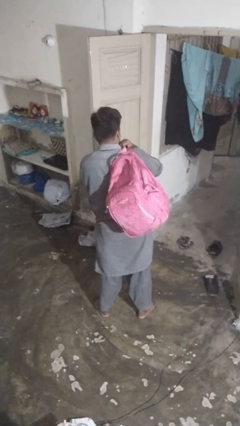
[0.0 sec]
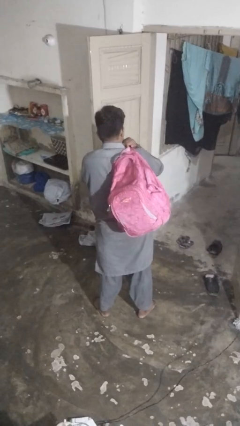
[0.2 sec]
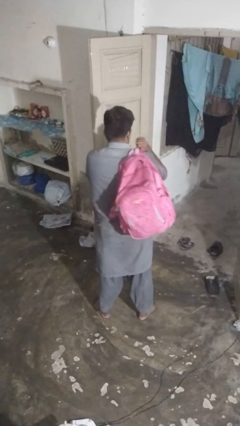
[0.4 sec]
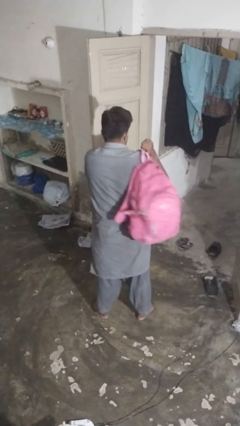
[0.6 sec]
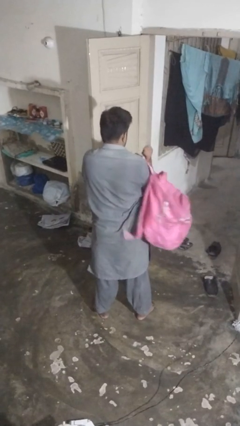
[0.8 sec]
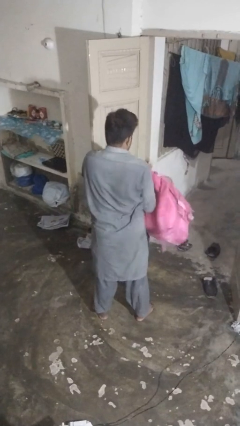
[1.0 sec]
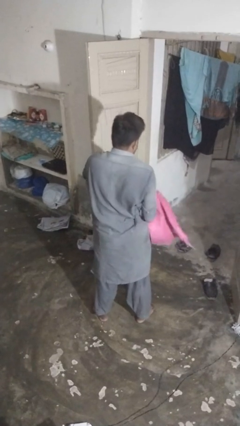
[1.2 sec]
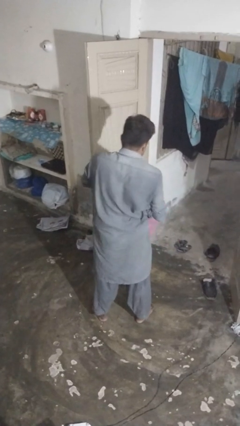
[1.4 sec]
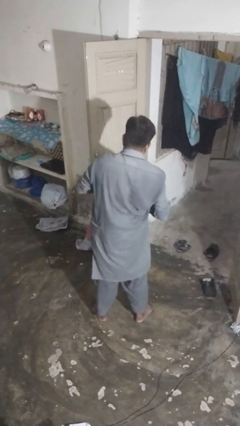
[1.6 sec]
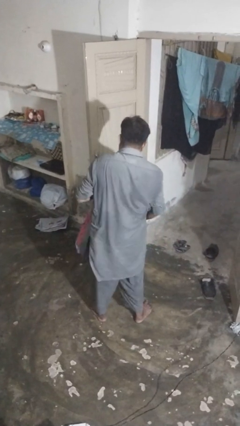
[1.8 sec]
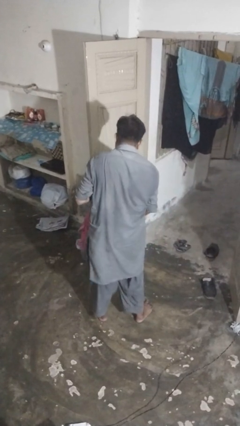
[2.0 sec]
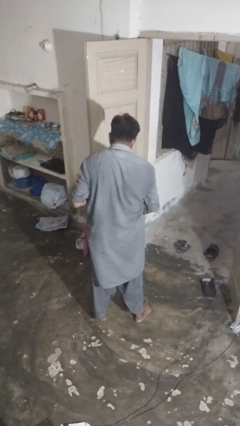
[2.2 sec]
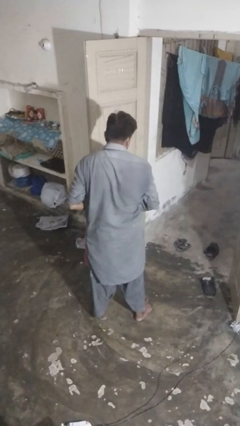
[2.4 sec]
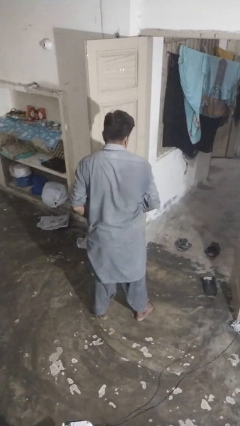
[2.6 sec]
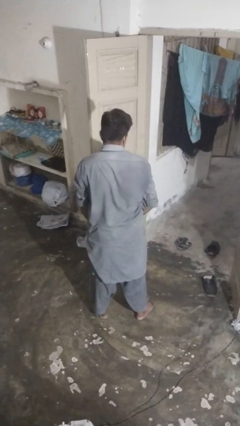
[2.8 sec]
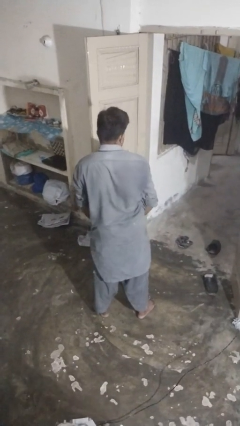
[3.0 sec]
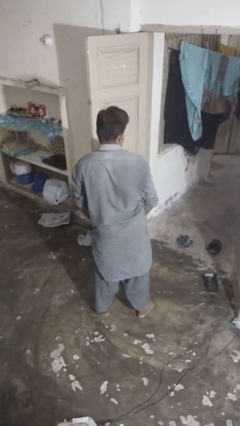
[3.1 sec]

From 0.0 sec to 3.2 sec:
person takes off backpack

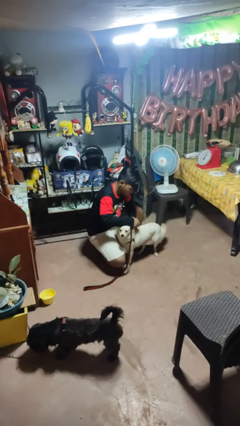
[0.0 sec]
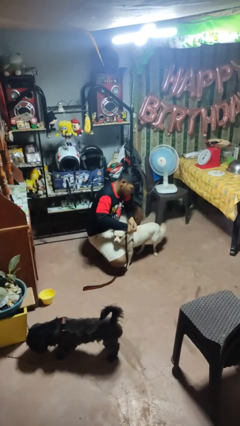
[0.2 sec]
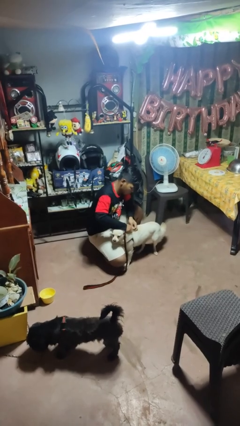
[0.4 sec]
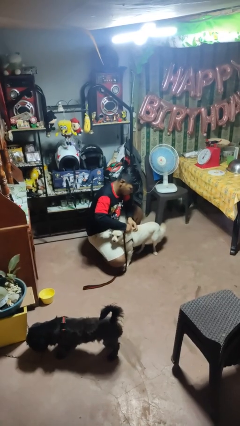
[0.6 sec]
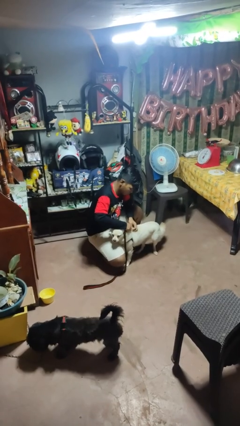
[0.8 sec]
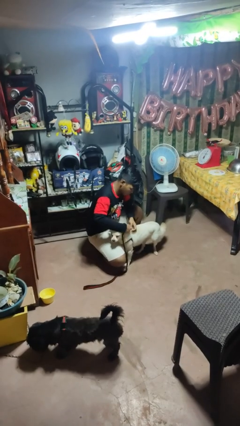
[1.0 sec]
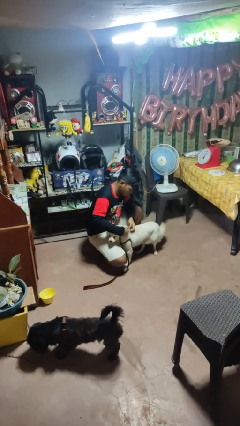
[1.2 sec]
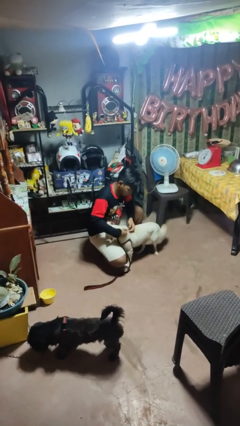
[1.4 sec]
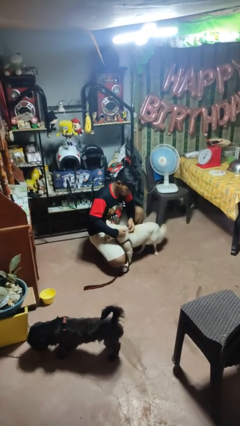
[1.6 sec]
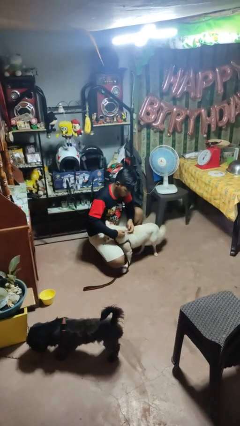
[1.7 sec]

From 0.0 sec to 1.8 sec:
person attaches leash to dog

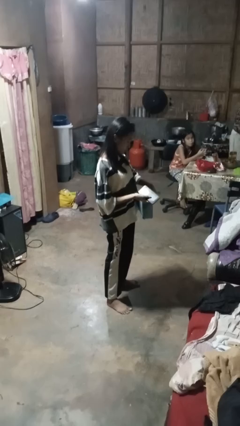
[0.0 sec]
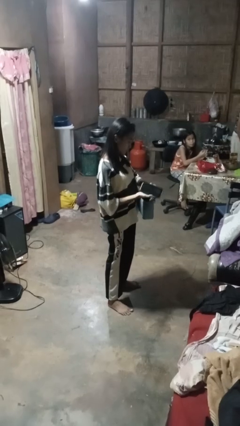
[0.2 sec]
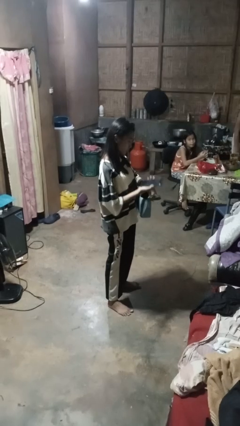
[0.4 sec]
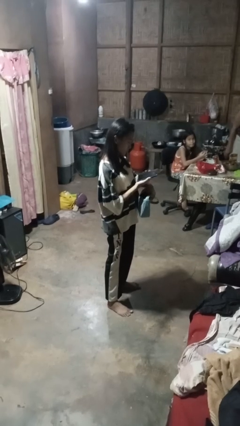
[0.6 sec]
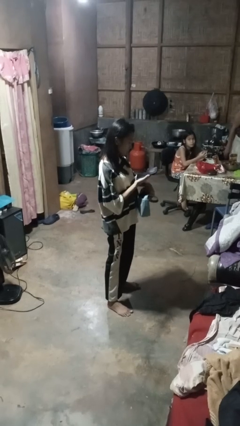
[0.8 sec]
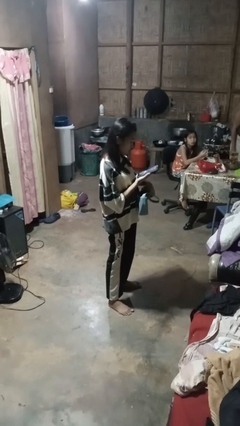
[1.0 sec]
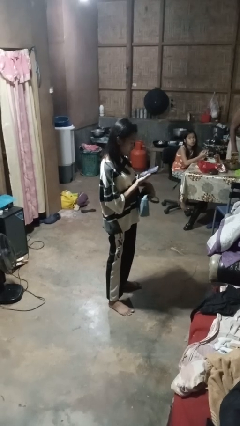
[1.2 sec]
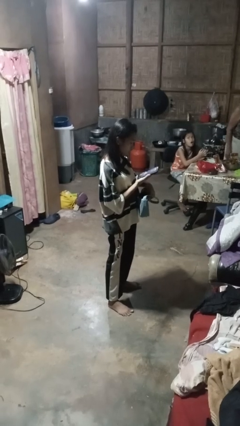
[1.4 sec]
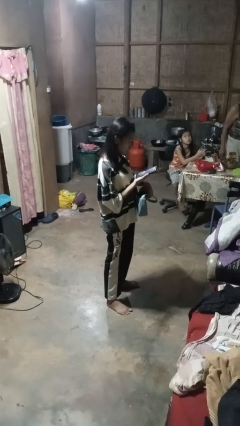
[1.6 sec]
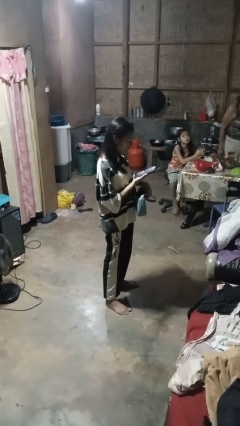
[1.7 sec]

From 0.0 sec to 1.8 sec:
person takes object from purse

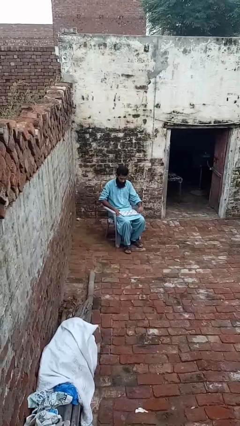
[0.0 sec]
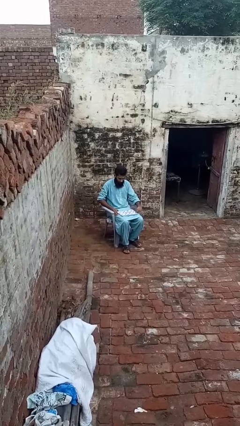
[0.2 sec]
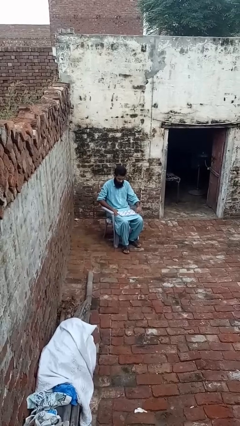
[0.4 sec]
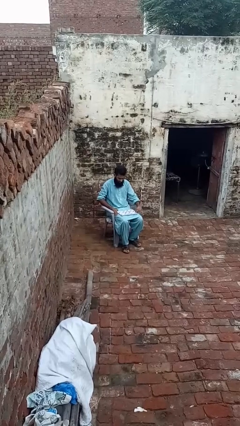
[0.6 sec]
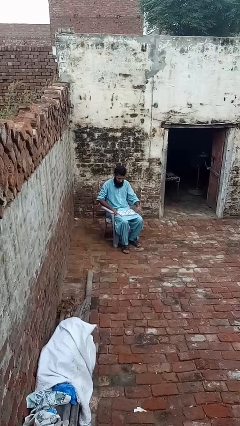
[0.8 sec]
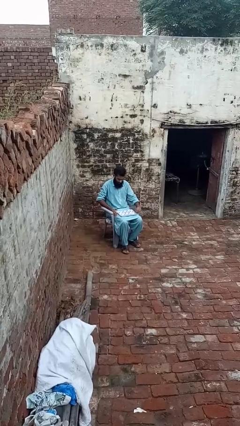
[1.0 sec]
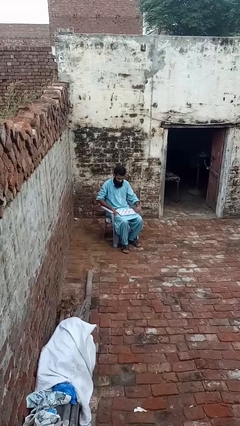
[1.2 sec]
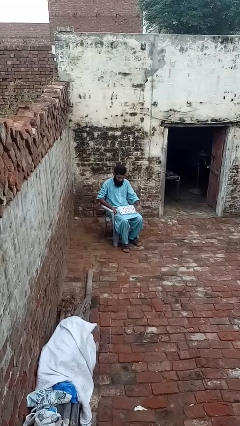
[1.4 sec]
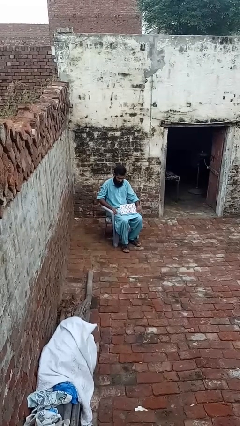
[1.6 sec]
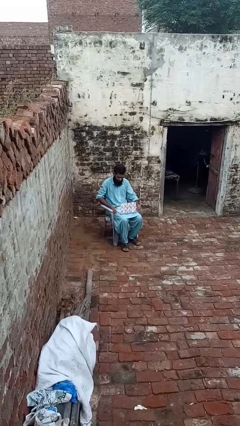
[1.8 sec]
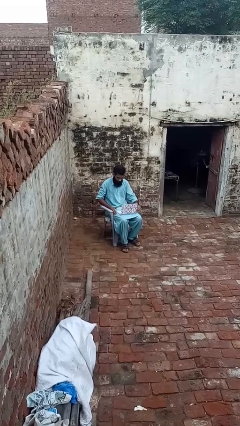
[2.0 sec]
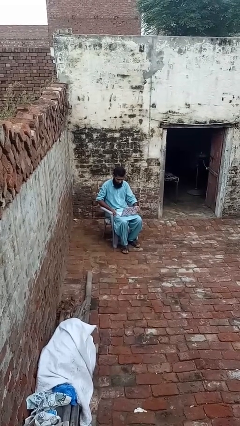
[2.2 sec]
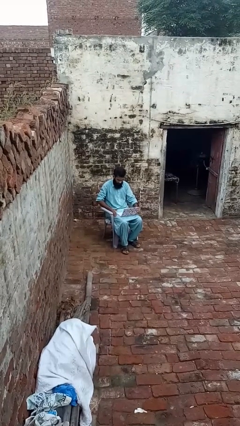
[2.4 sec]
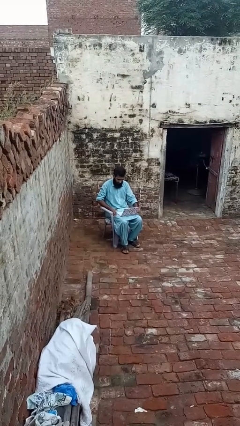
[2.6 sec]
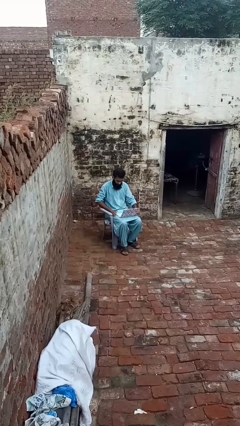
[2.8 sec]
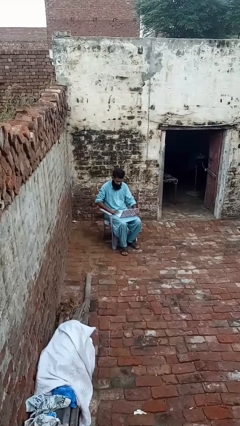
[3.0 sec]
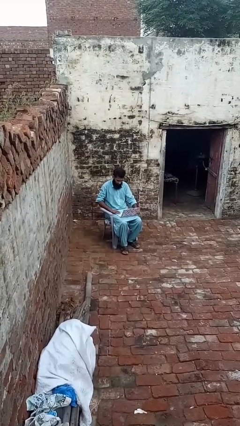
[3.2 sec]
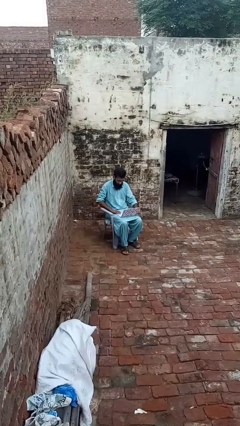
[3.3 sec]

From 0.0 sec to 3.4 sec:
person opens laptop

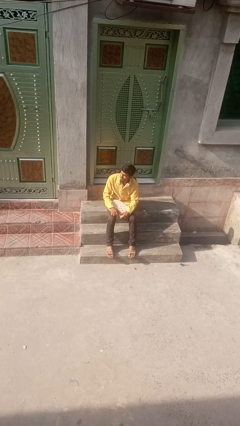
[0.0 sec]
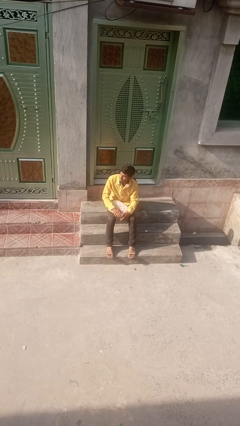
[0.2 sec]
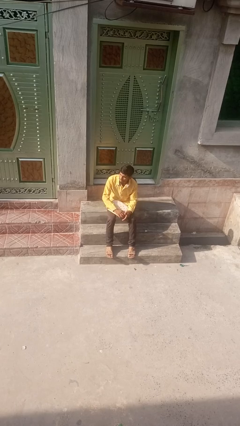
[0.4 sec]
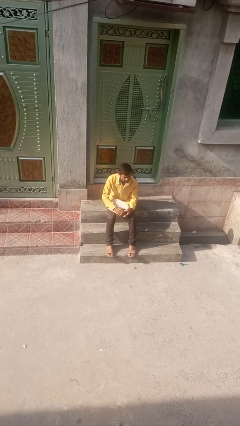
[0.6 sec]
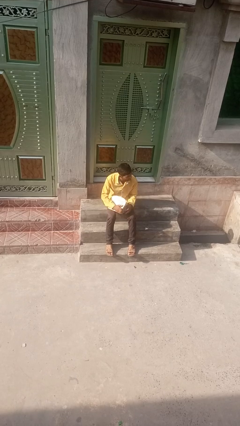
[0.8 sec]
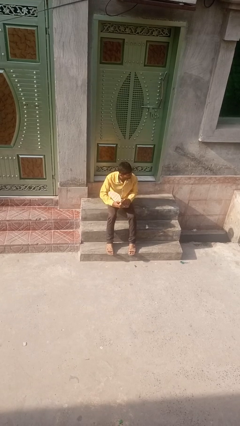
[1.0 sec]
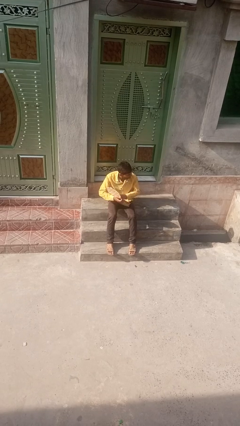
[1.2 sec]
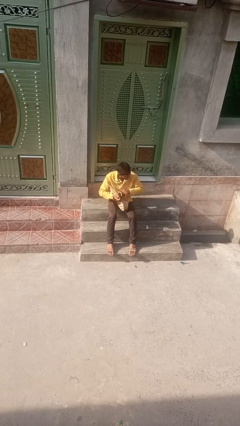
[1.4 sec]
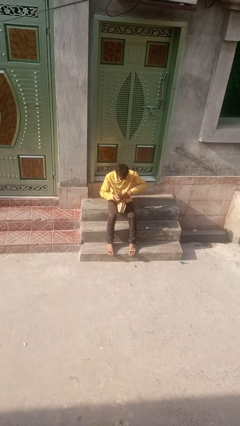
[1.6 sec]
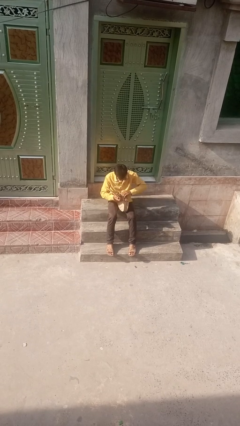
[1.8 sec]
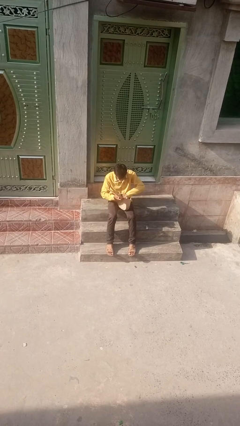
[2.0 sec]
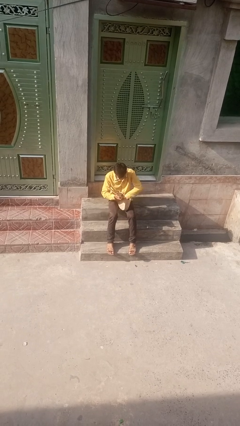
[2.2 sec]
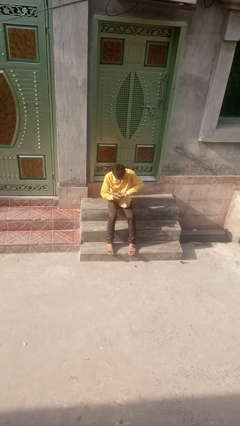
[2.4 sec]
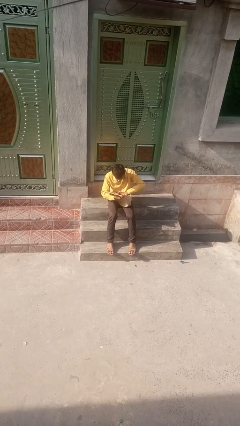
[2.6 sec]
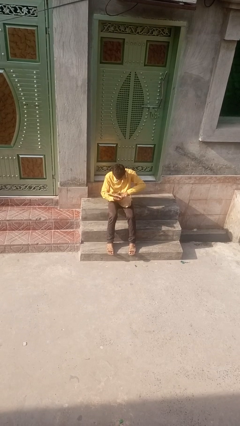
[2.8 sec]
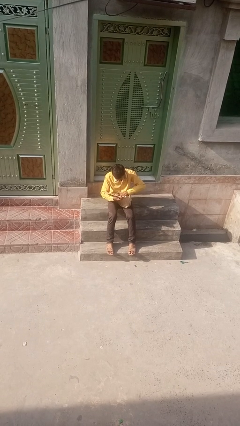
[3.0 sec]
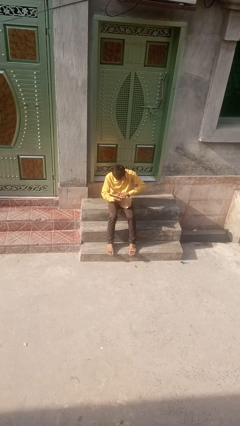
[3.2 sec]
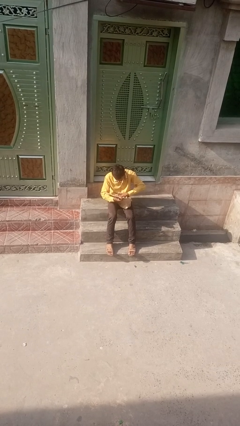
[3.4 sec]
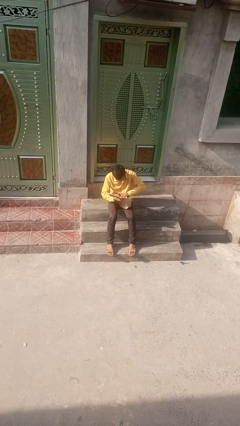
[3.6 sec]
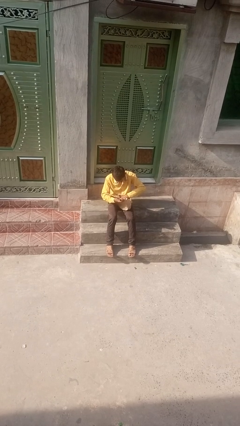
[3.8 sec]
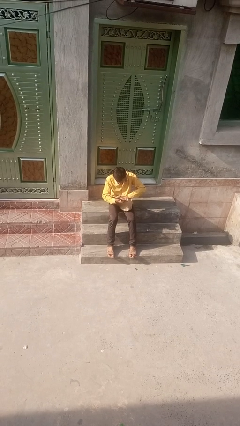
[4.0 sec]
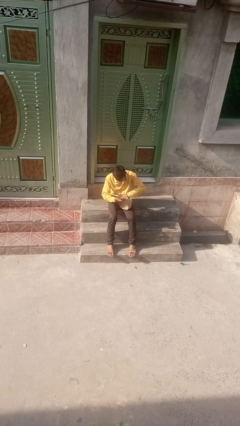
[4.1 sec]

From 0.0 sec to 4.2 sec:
person searches in backpack

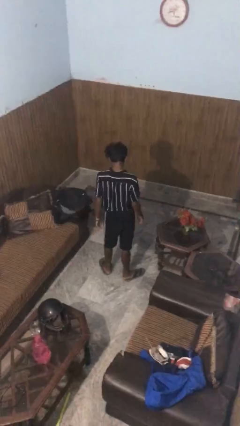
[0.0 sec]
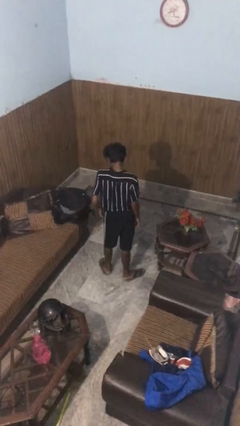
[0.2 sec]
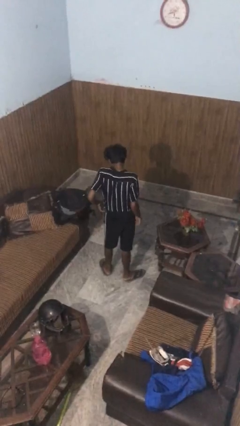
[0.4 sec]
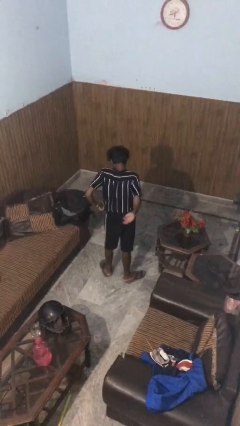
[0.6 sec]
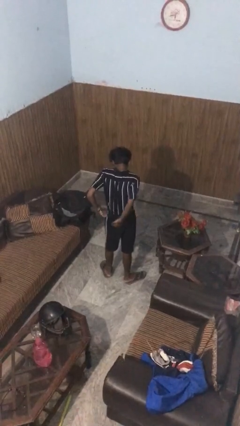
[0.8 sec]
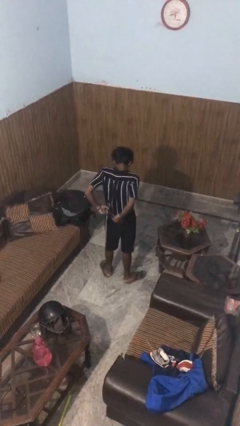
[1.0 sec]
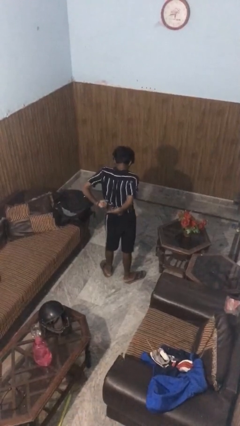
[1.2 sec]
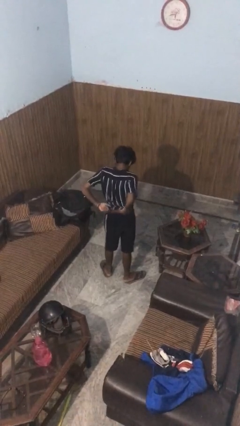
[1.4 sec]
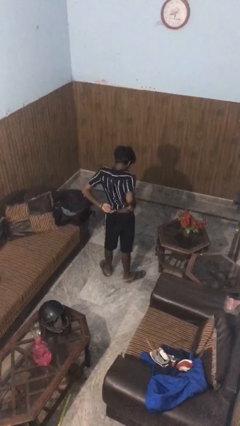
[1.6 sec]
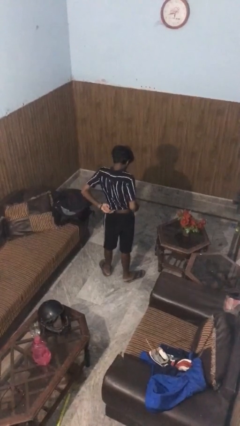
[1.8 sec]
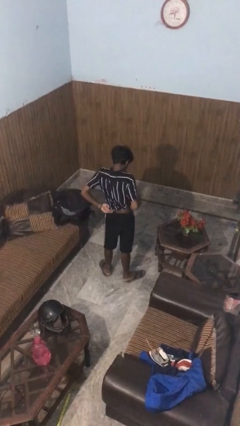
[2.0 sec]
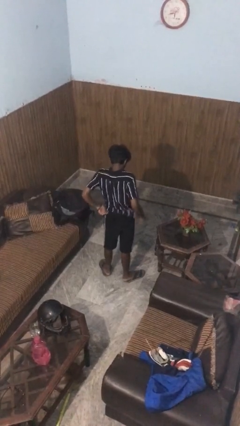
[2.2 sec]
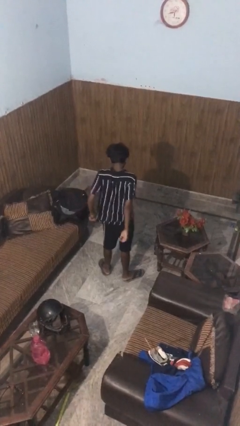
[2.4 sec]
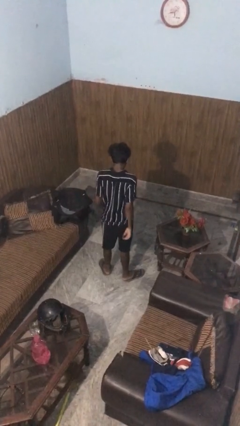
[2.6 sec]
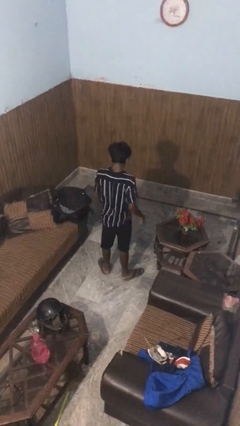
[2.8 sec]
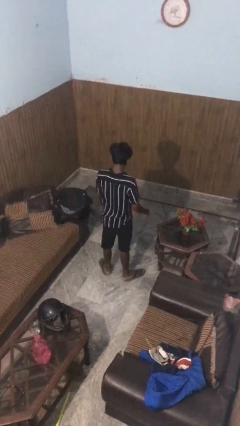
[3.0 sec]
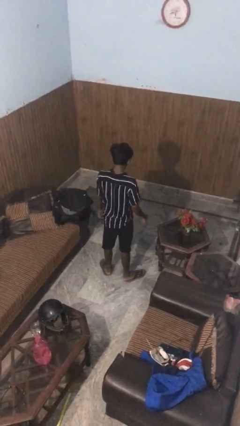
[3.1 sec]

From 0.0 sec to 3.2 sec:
person untucks shirt
